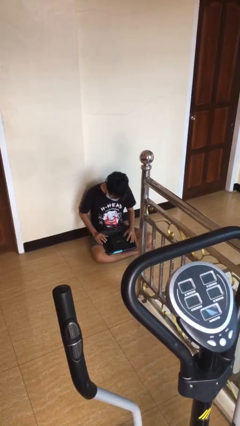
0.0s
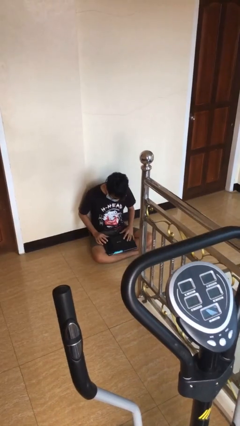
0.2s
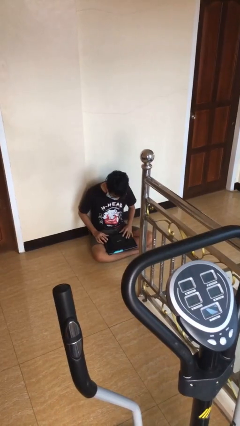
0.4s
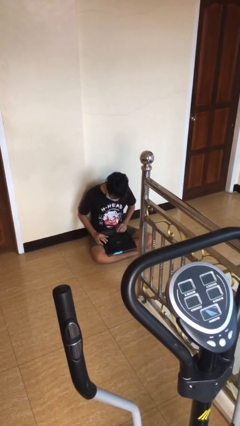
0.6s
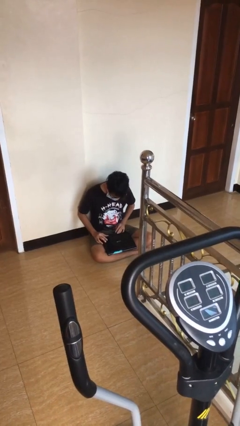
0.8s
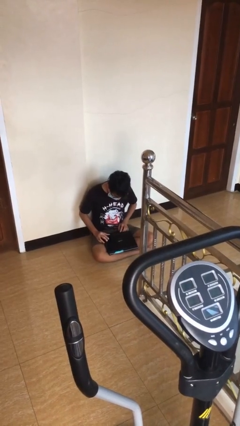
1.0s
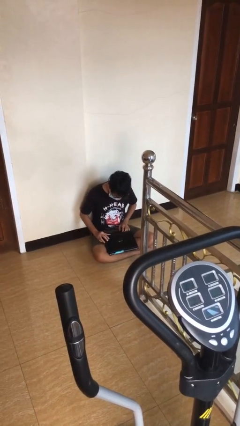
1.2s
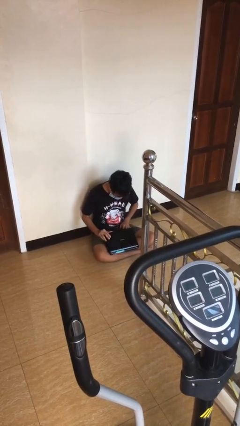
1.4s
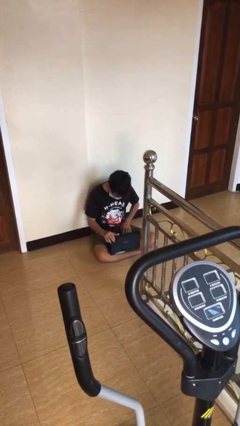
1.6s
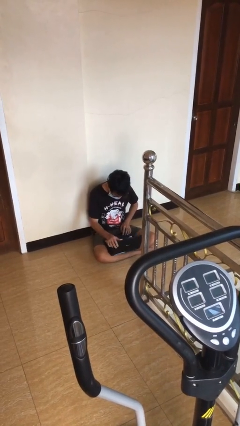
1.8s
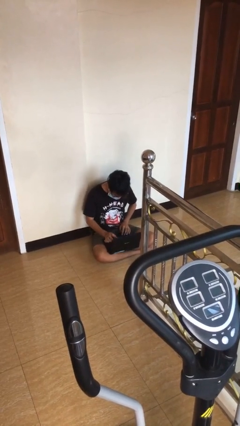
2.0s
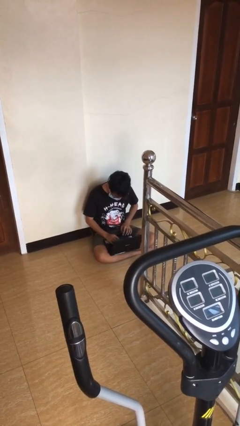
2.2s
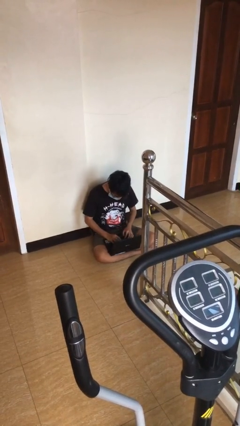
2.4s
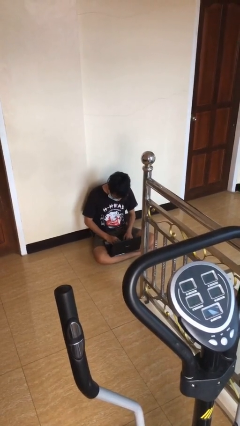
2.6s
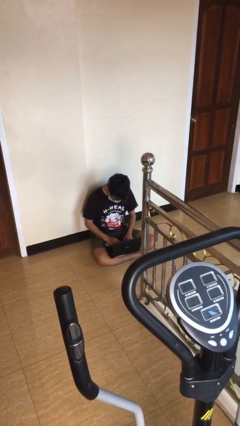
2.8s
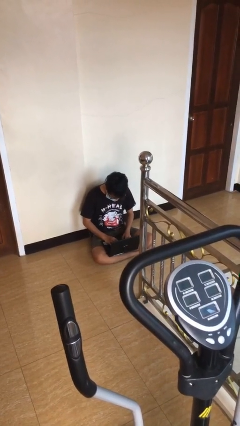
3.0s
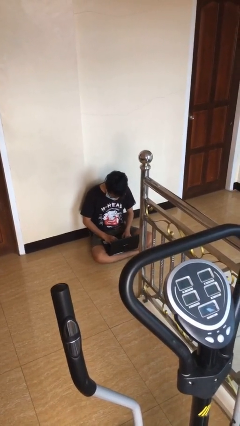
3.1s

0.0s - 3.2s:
person interacts with laptop

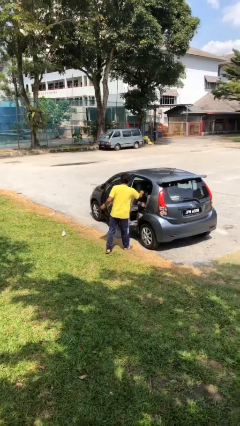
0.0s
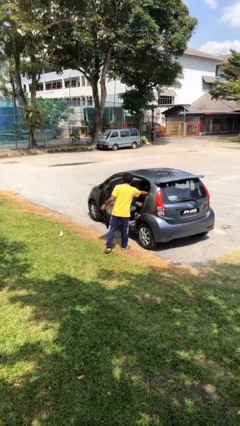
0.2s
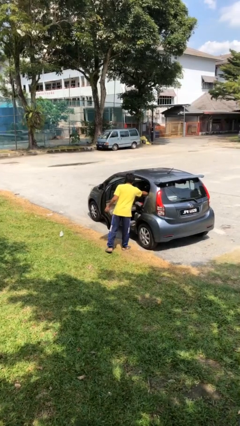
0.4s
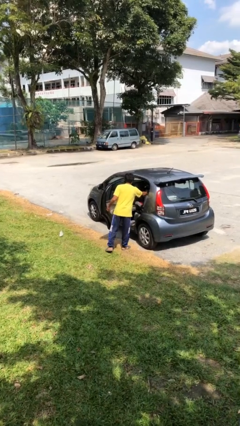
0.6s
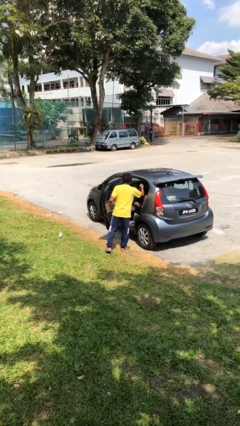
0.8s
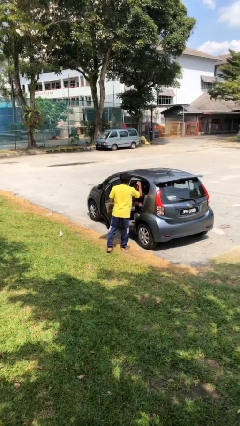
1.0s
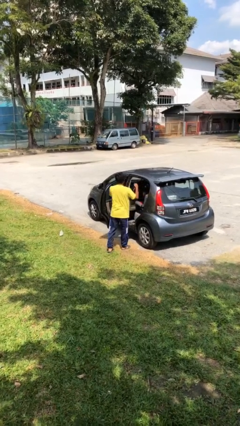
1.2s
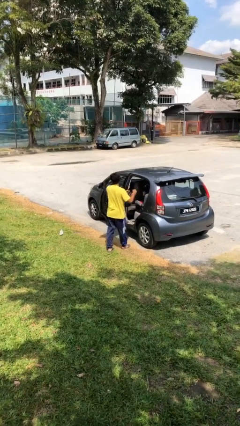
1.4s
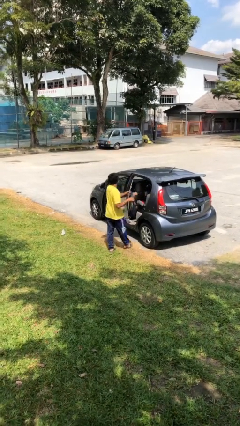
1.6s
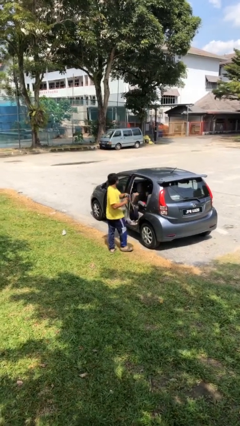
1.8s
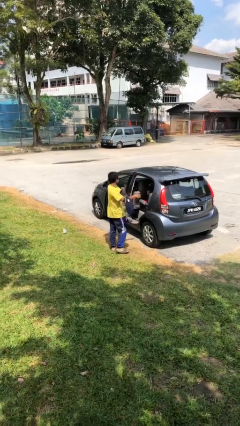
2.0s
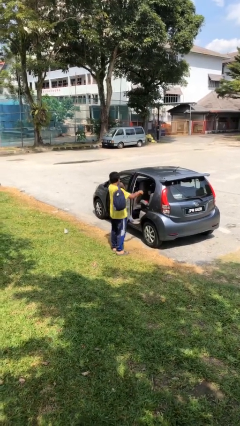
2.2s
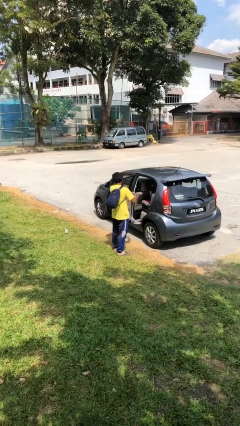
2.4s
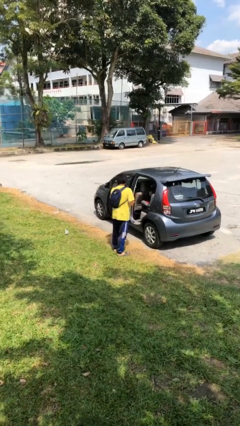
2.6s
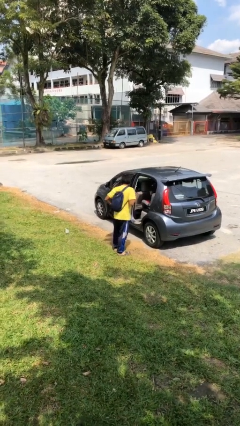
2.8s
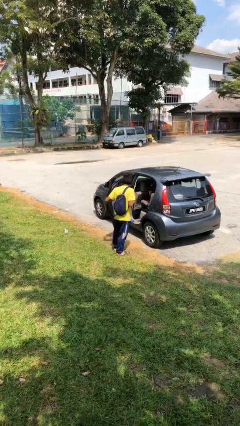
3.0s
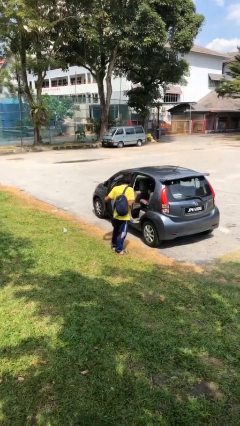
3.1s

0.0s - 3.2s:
person unloads car

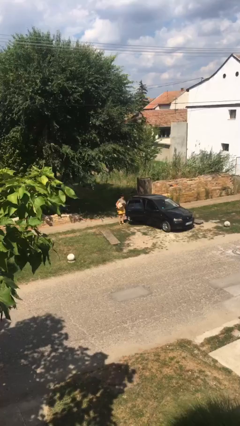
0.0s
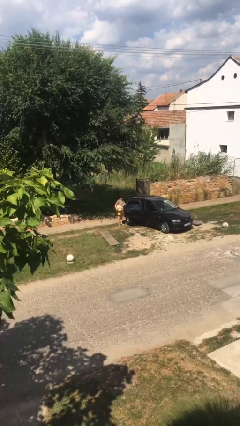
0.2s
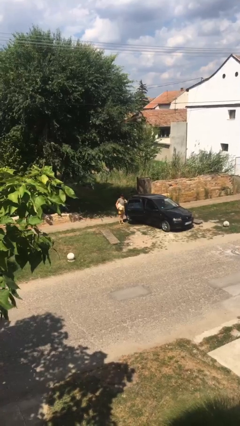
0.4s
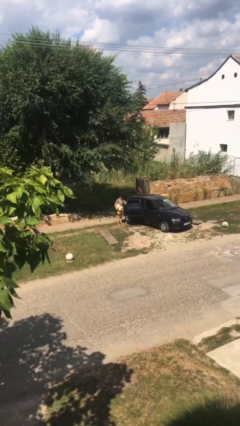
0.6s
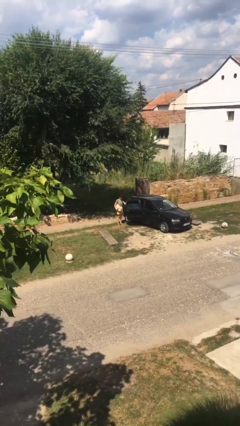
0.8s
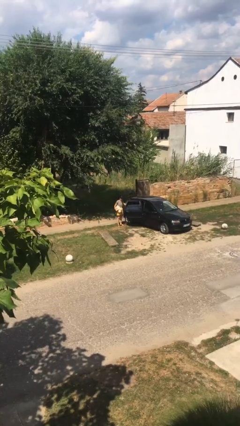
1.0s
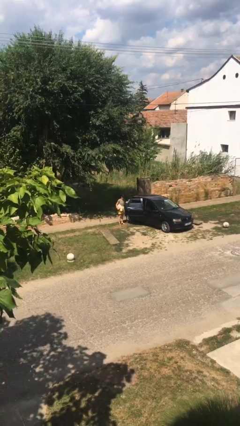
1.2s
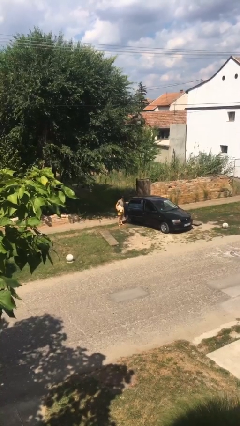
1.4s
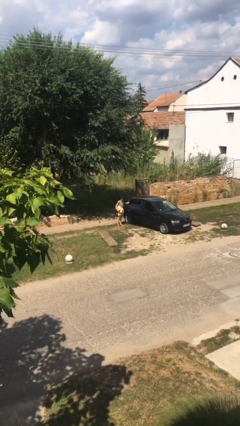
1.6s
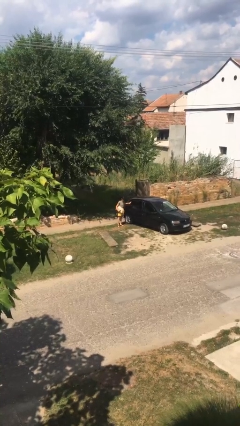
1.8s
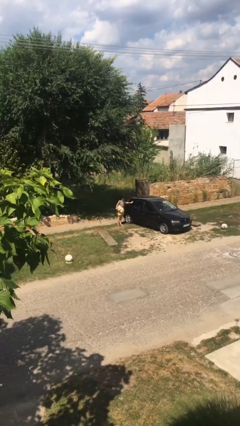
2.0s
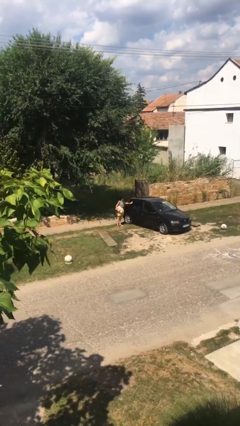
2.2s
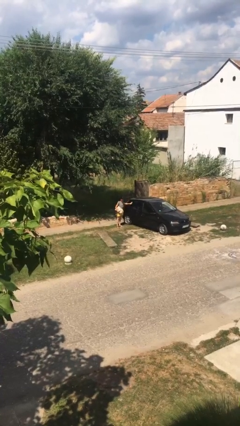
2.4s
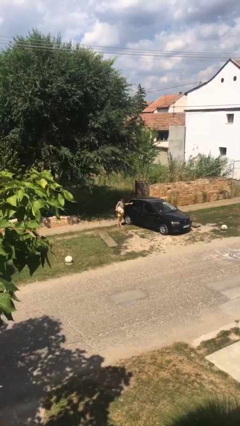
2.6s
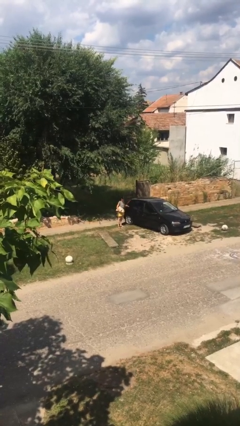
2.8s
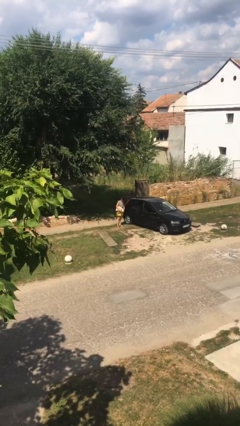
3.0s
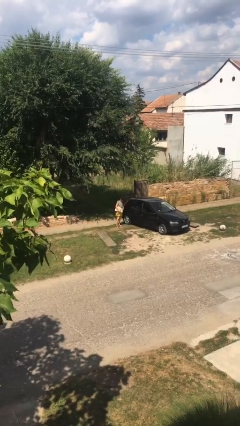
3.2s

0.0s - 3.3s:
person closes car door

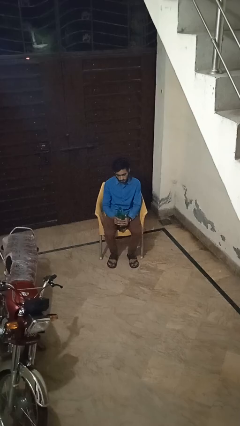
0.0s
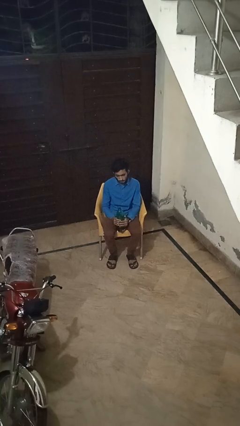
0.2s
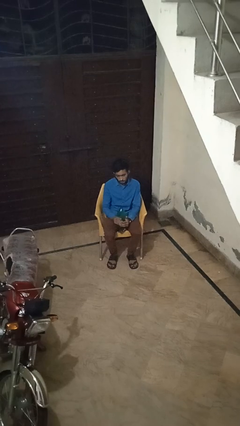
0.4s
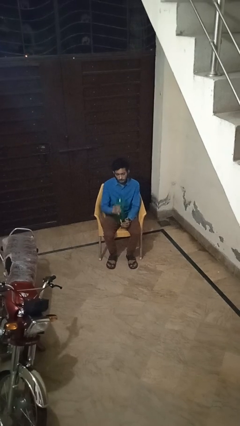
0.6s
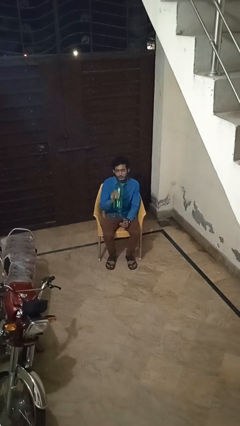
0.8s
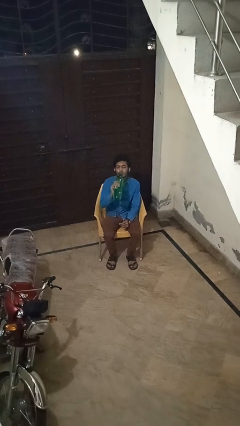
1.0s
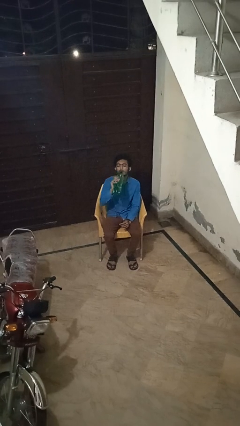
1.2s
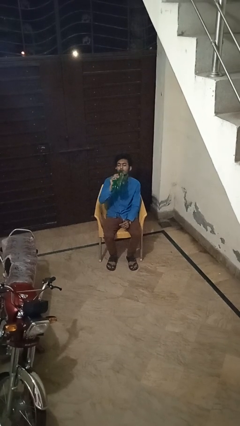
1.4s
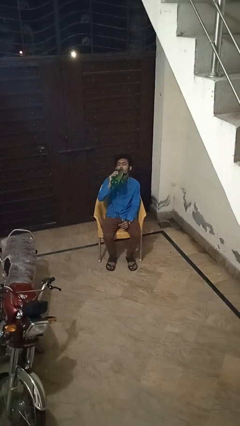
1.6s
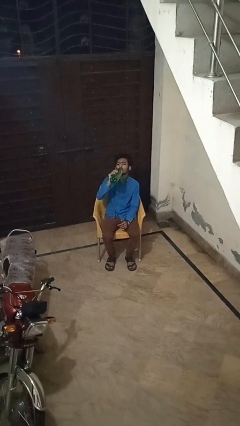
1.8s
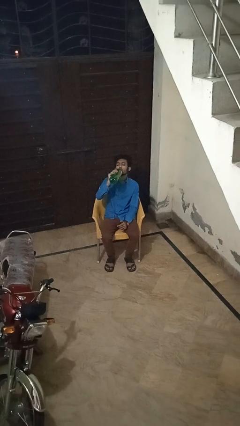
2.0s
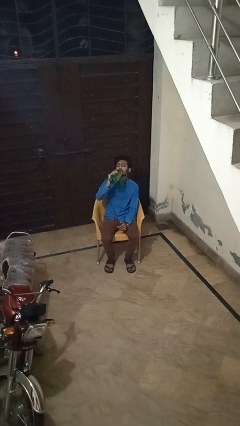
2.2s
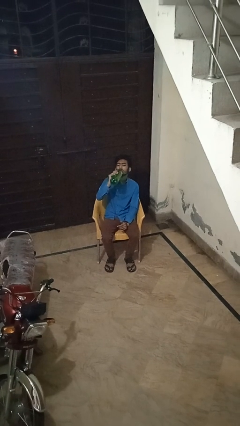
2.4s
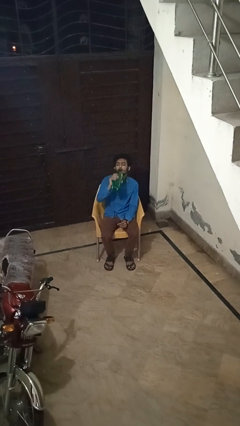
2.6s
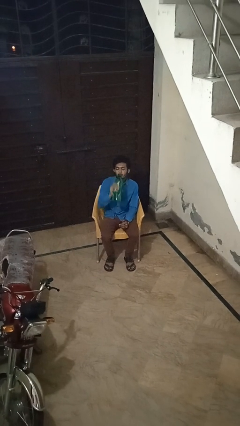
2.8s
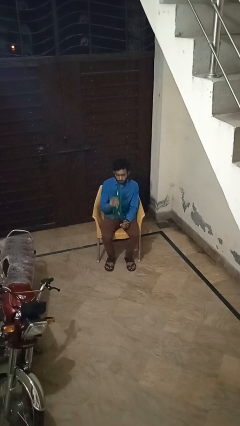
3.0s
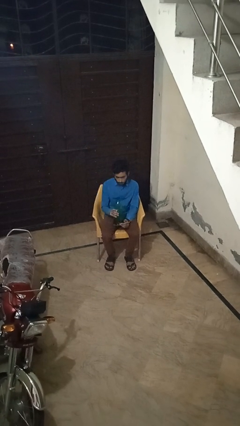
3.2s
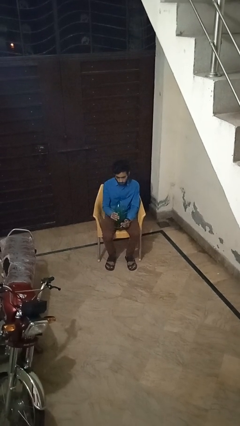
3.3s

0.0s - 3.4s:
person drinks from bottle

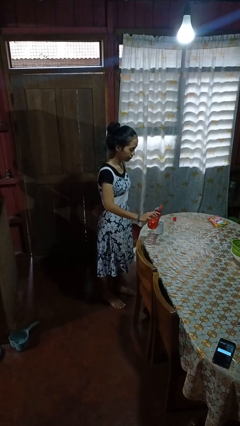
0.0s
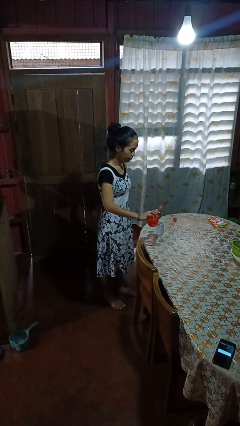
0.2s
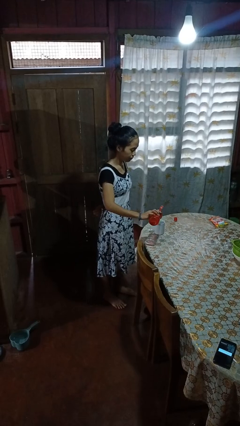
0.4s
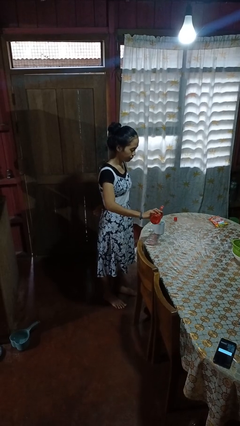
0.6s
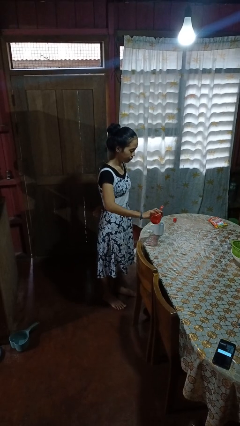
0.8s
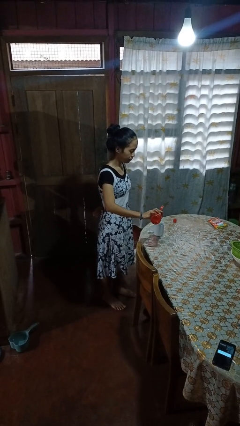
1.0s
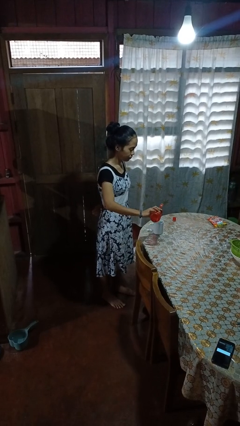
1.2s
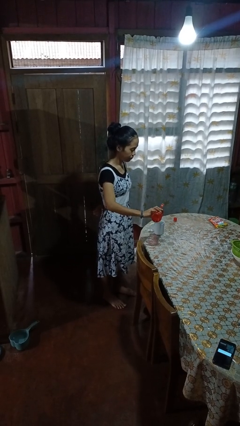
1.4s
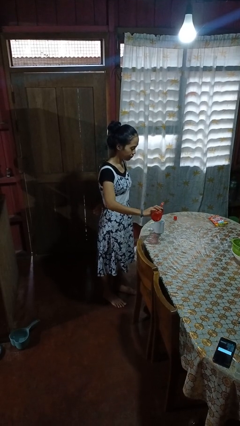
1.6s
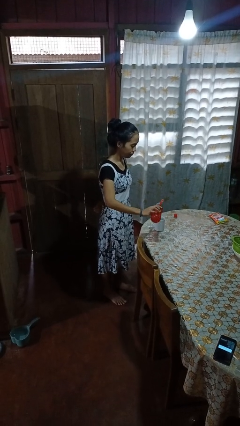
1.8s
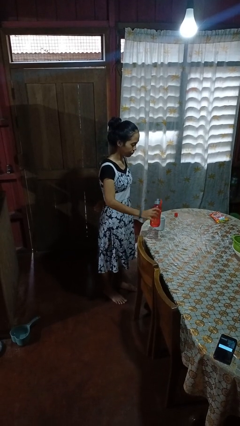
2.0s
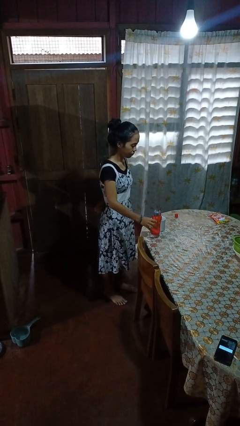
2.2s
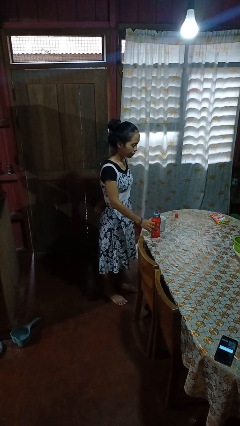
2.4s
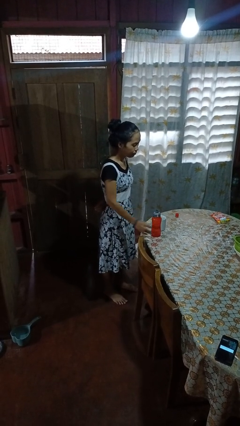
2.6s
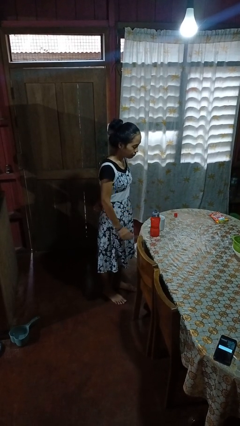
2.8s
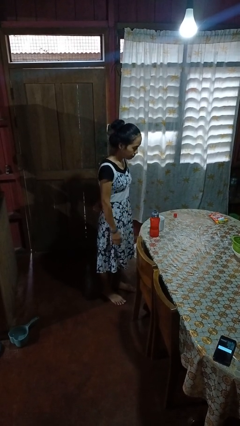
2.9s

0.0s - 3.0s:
person pours liquid into cup

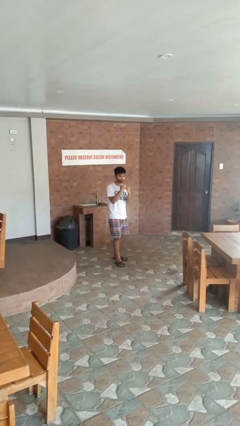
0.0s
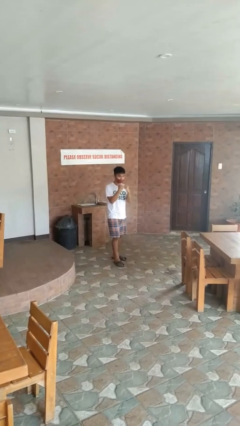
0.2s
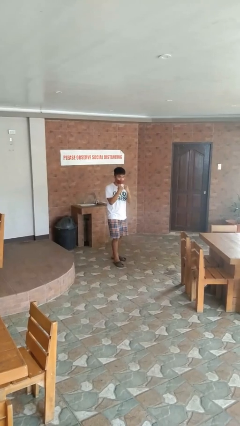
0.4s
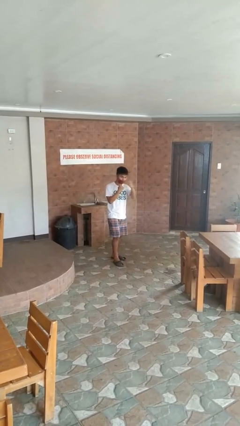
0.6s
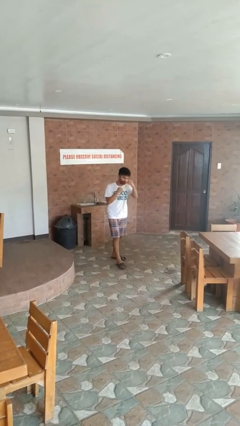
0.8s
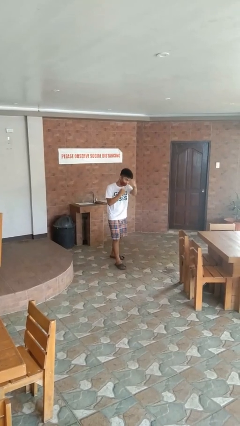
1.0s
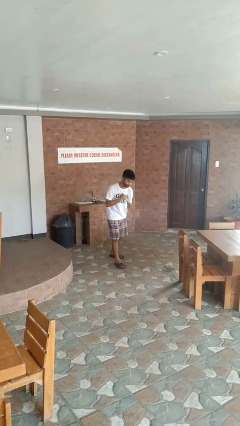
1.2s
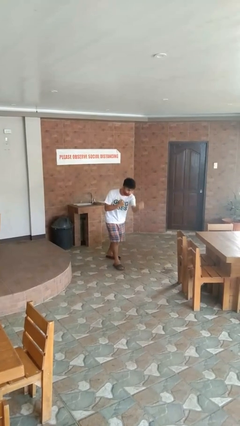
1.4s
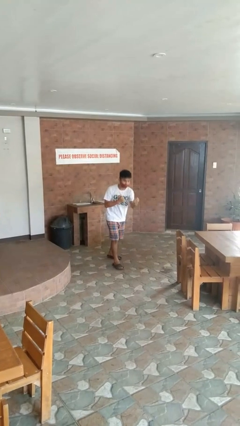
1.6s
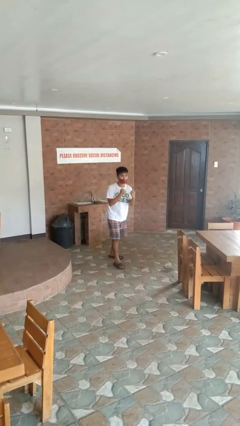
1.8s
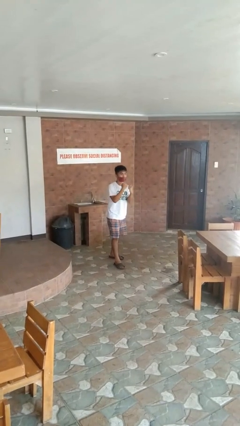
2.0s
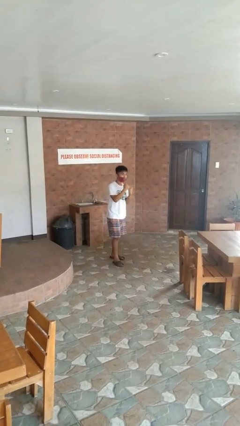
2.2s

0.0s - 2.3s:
person punches
